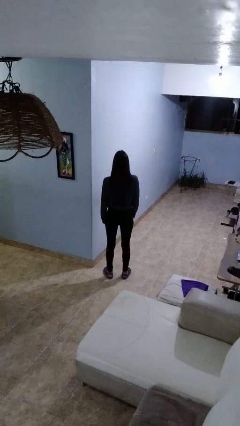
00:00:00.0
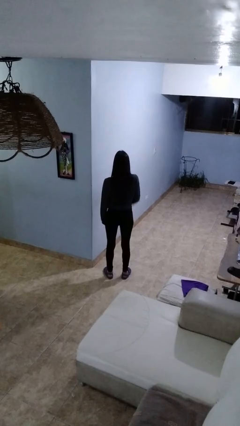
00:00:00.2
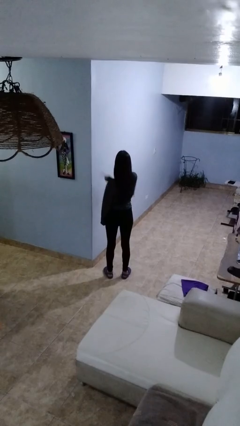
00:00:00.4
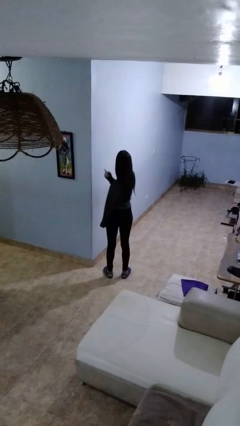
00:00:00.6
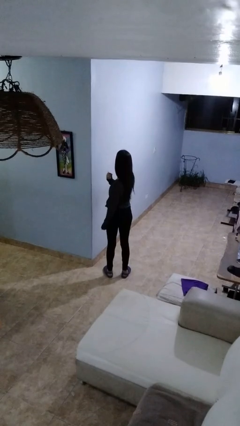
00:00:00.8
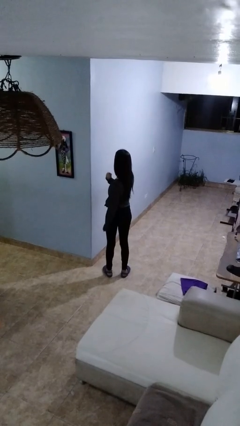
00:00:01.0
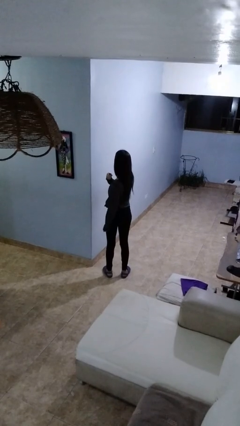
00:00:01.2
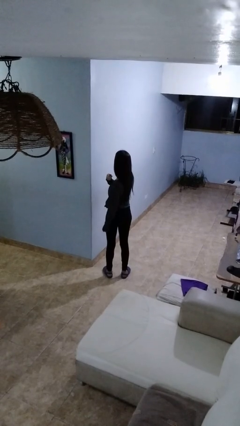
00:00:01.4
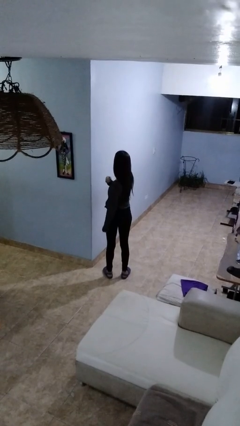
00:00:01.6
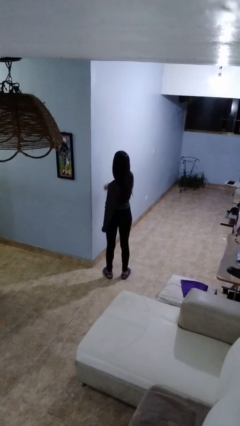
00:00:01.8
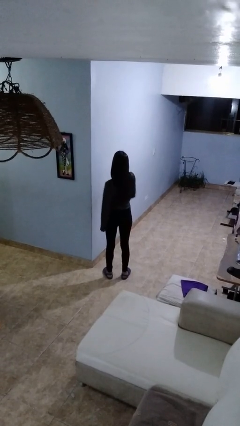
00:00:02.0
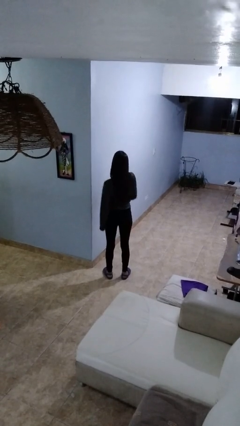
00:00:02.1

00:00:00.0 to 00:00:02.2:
person gestures behind me

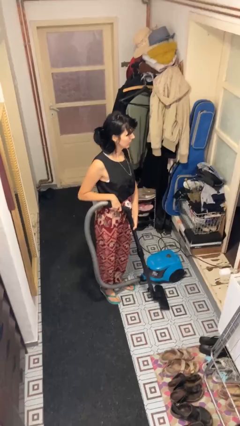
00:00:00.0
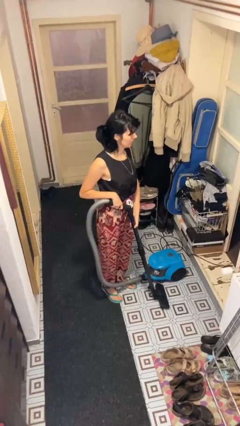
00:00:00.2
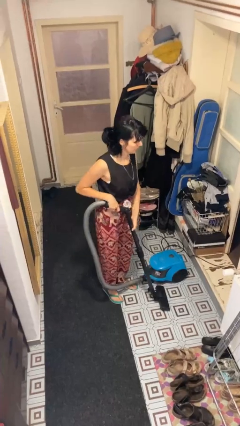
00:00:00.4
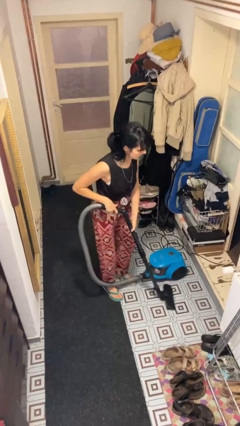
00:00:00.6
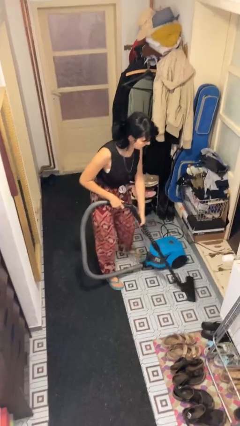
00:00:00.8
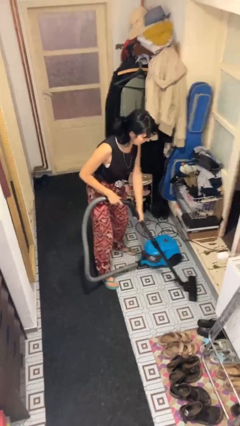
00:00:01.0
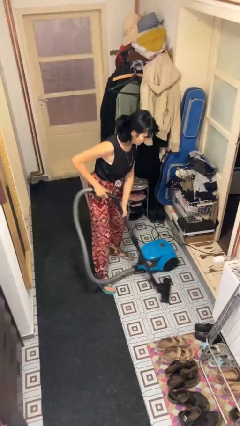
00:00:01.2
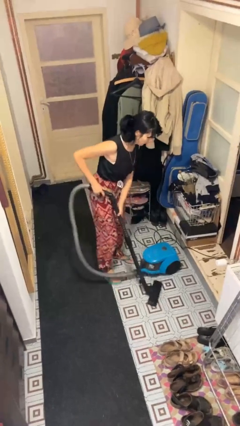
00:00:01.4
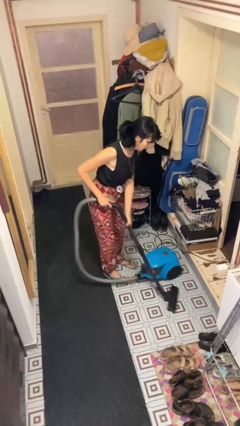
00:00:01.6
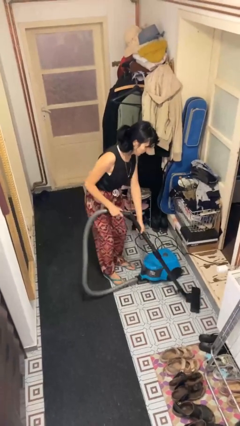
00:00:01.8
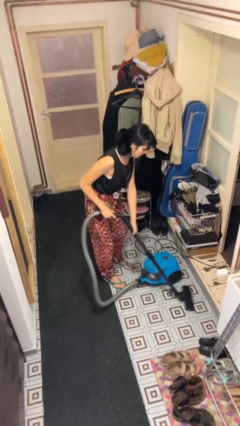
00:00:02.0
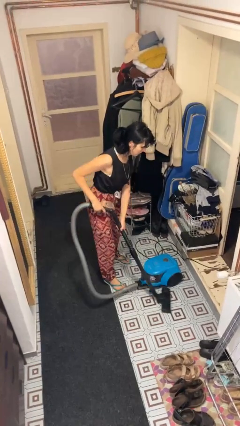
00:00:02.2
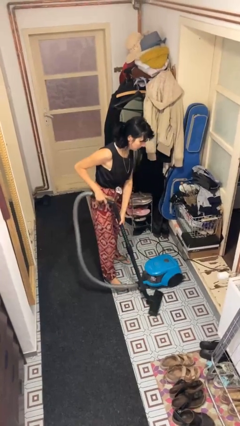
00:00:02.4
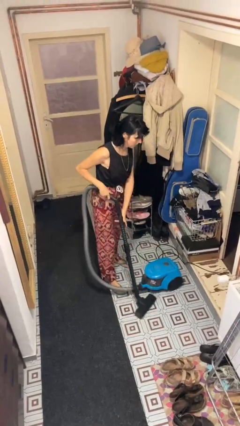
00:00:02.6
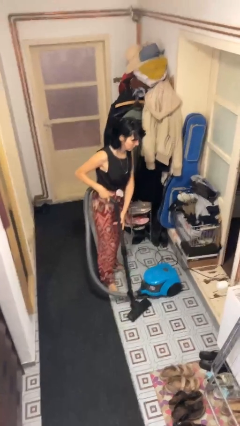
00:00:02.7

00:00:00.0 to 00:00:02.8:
person vacuums carpet

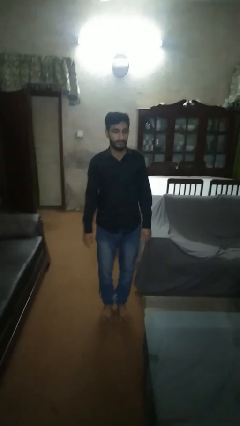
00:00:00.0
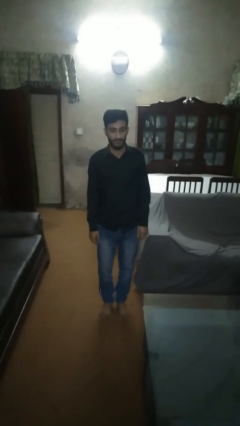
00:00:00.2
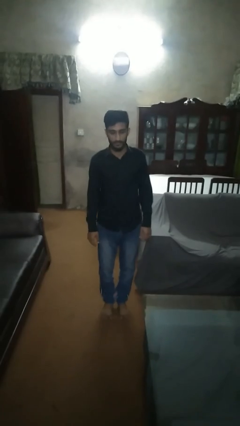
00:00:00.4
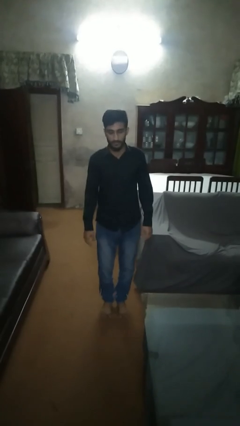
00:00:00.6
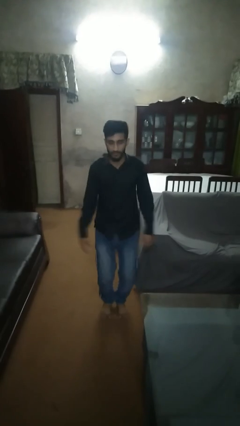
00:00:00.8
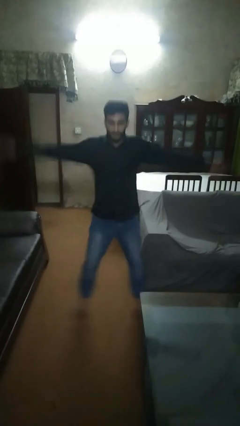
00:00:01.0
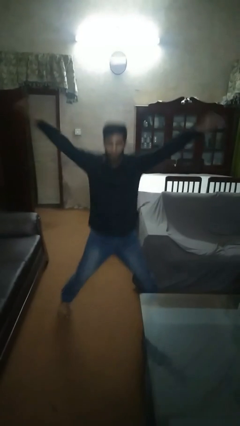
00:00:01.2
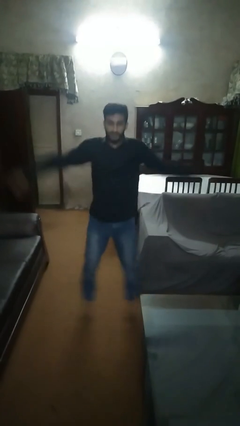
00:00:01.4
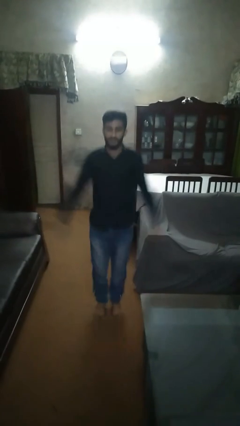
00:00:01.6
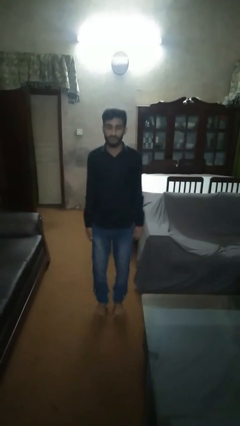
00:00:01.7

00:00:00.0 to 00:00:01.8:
person exercises with jumping jacks

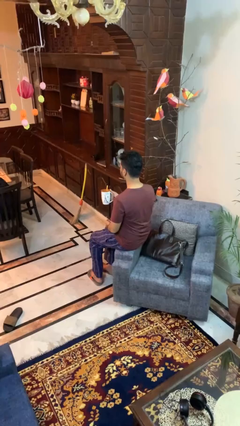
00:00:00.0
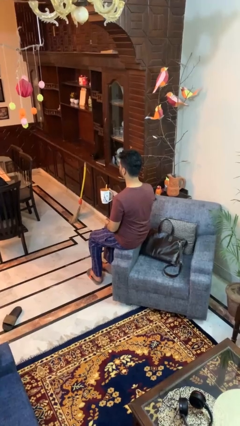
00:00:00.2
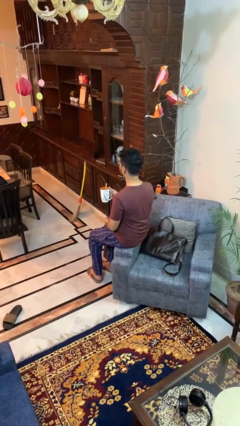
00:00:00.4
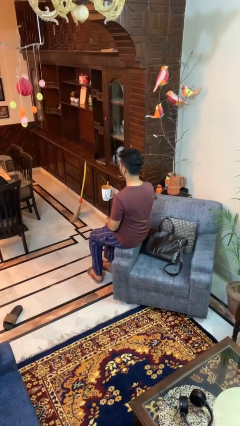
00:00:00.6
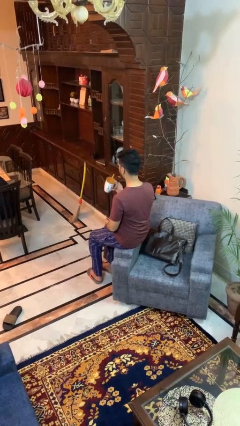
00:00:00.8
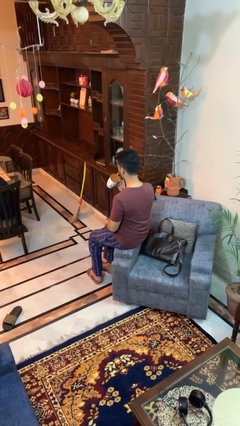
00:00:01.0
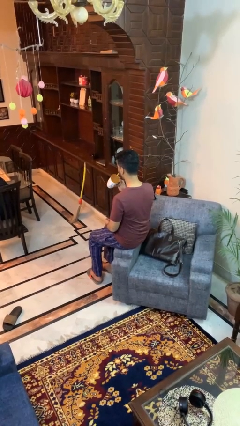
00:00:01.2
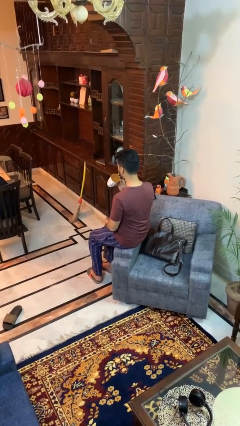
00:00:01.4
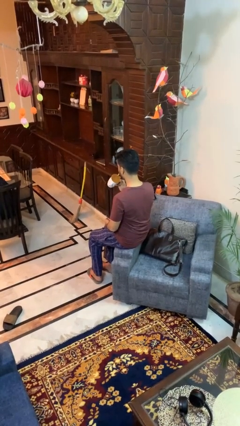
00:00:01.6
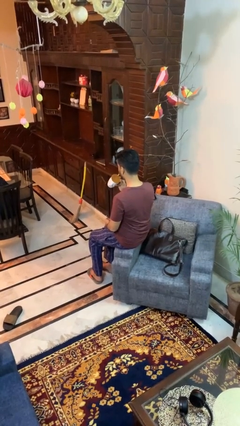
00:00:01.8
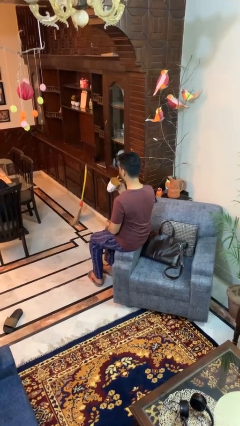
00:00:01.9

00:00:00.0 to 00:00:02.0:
person drinks from straw

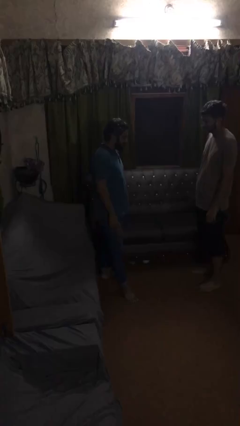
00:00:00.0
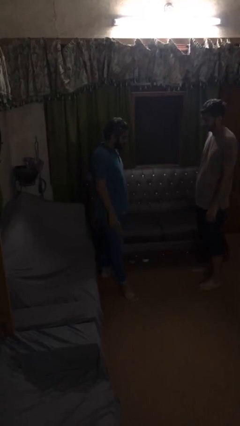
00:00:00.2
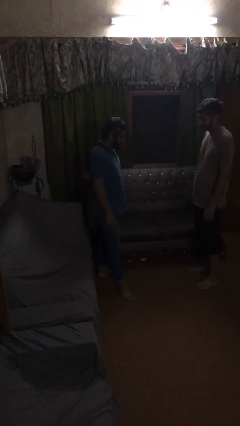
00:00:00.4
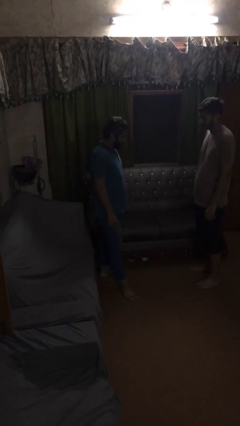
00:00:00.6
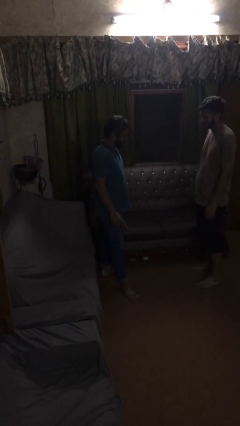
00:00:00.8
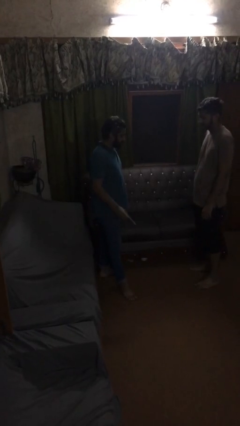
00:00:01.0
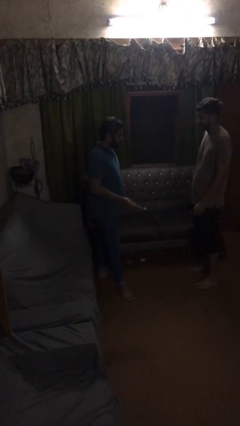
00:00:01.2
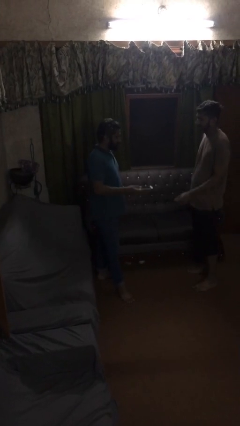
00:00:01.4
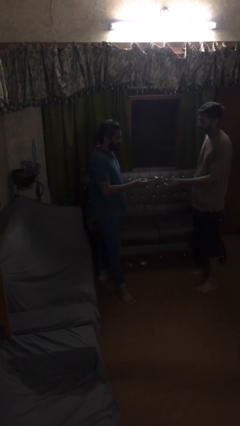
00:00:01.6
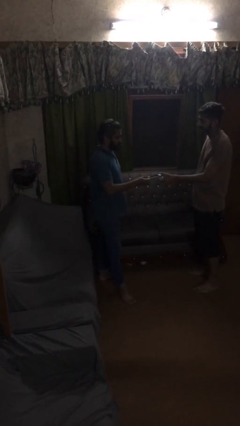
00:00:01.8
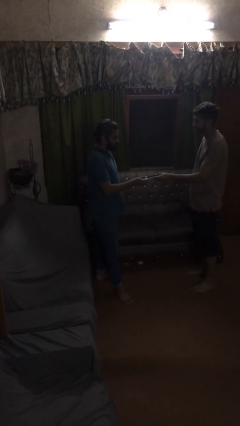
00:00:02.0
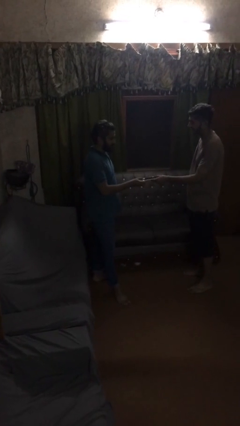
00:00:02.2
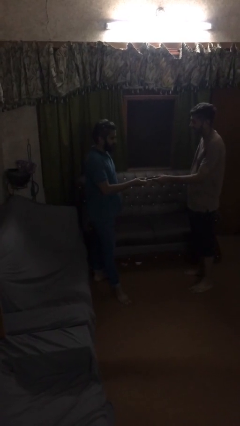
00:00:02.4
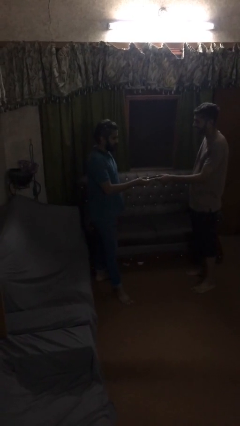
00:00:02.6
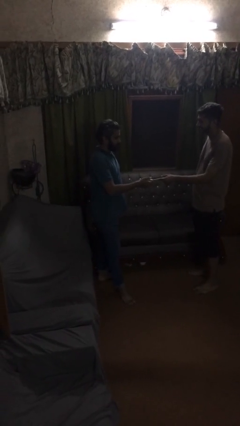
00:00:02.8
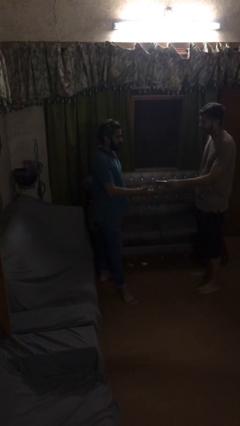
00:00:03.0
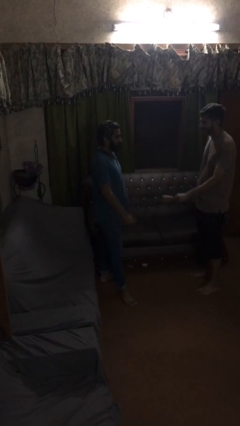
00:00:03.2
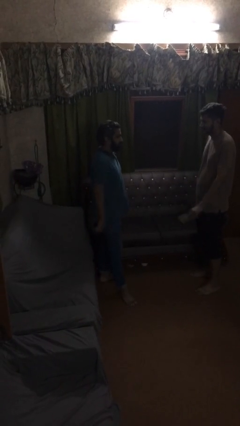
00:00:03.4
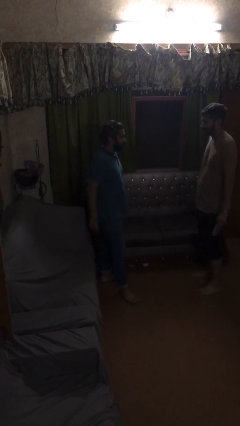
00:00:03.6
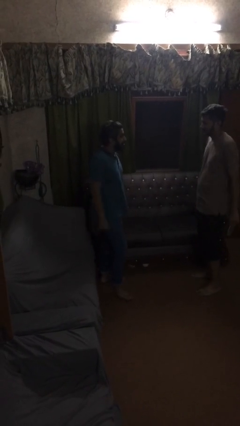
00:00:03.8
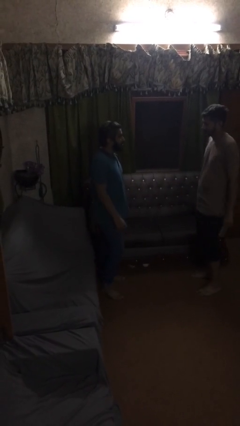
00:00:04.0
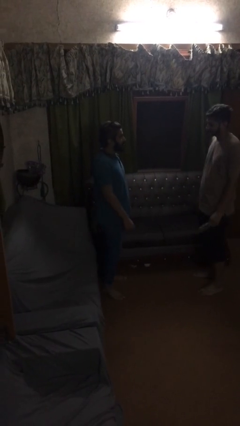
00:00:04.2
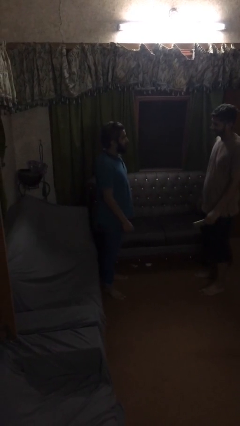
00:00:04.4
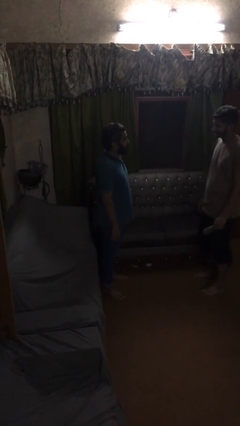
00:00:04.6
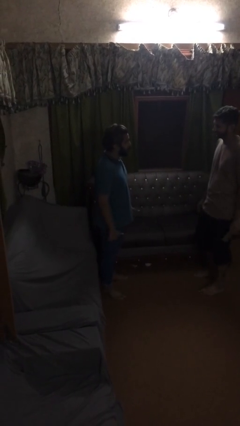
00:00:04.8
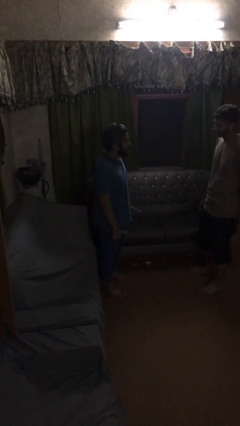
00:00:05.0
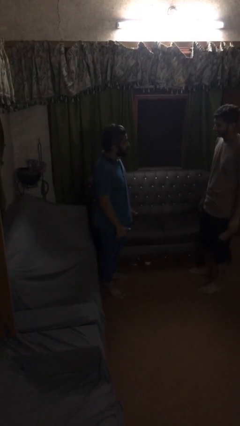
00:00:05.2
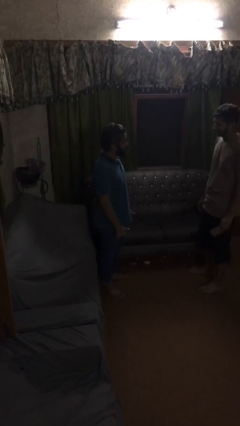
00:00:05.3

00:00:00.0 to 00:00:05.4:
person transfers object to person

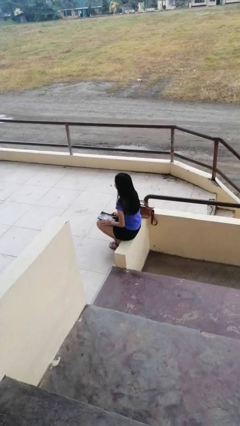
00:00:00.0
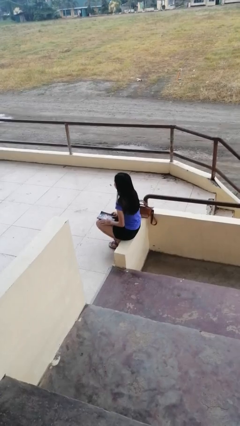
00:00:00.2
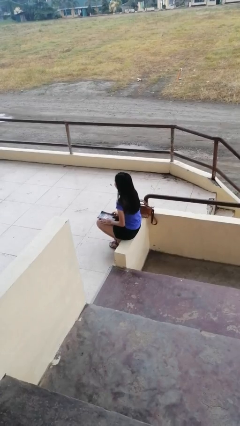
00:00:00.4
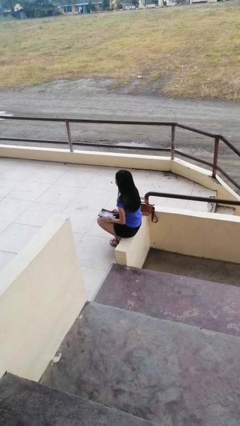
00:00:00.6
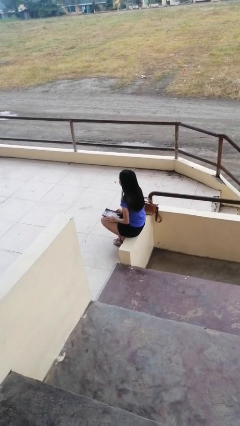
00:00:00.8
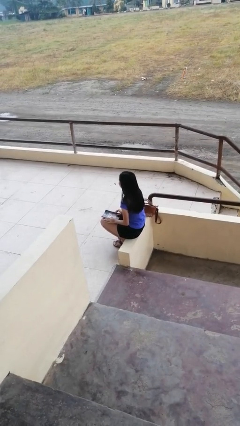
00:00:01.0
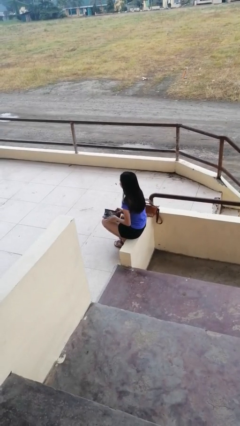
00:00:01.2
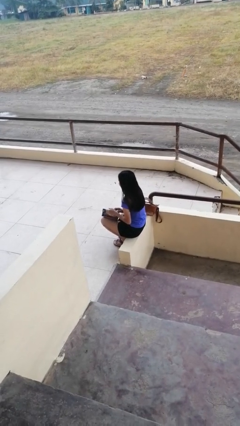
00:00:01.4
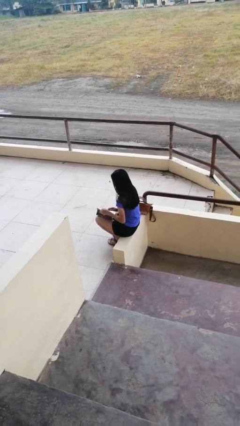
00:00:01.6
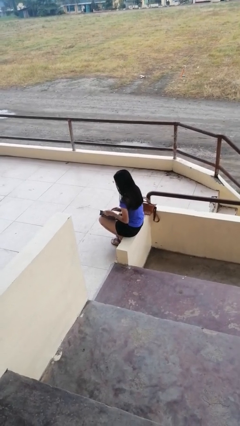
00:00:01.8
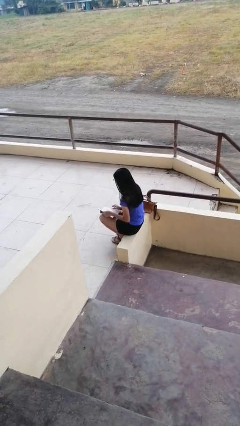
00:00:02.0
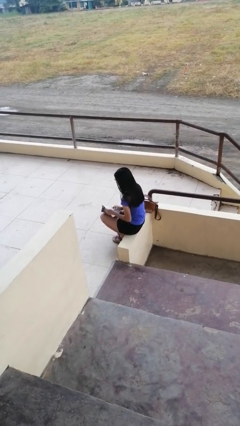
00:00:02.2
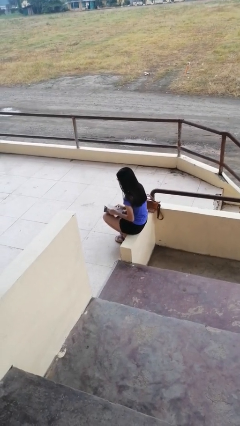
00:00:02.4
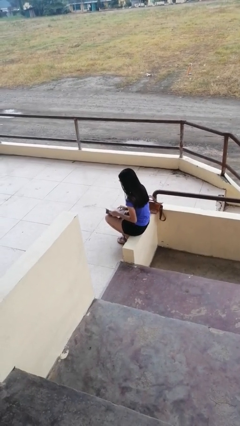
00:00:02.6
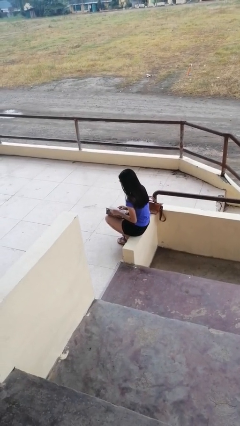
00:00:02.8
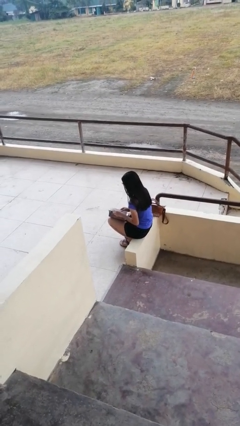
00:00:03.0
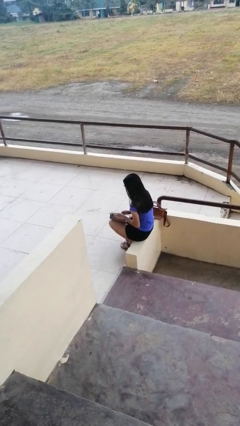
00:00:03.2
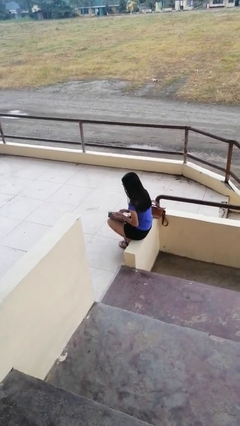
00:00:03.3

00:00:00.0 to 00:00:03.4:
person reads book
